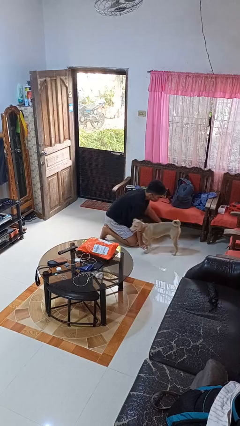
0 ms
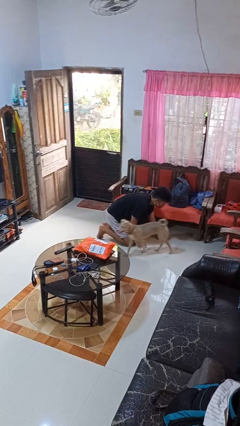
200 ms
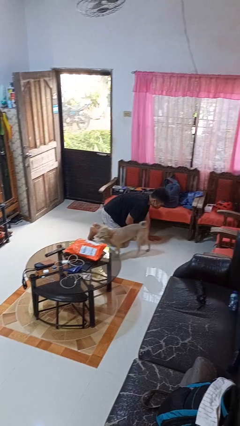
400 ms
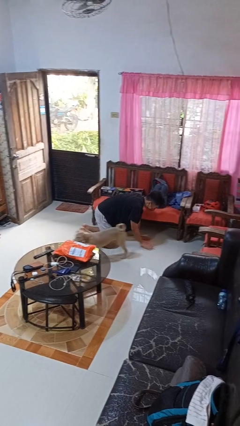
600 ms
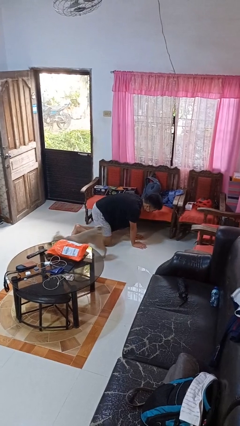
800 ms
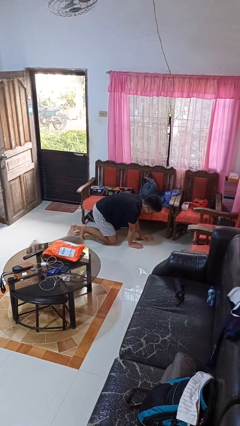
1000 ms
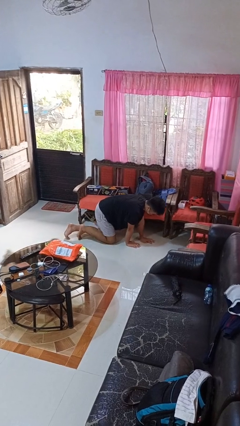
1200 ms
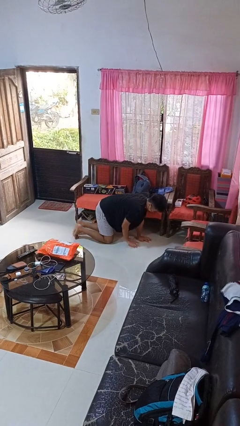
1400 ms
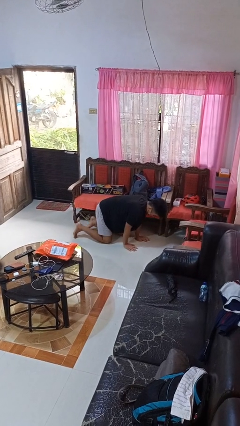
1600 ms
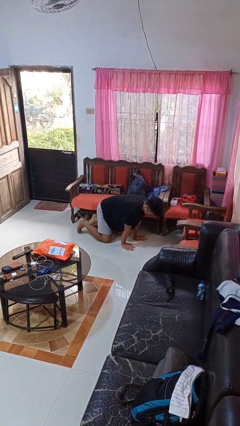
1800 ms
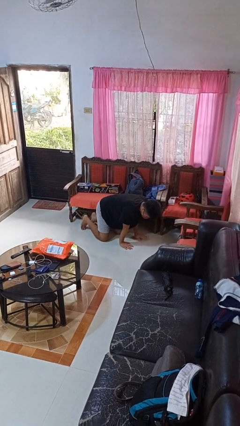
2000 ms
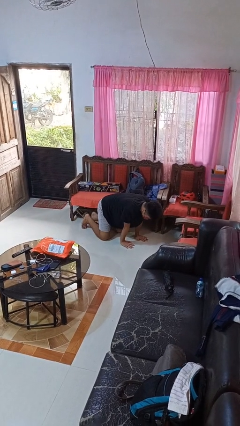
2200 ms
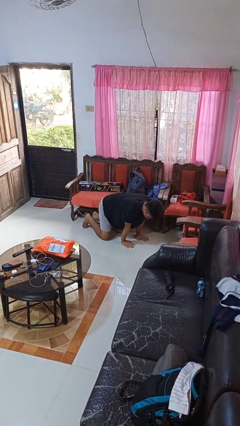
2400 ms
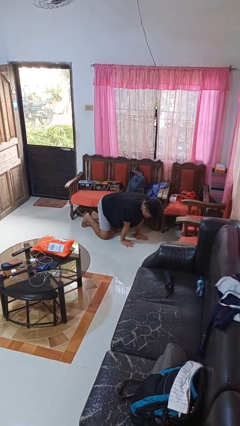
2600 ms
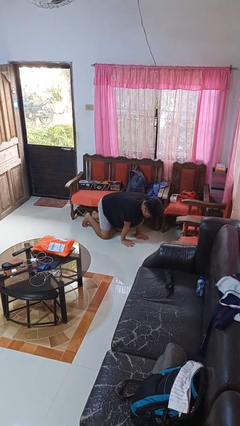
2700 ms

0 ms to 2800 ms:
person crawls

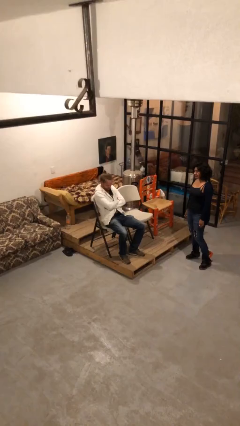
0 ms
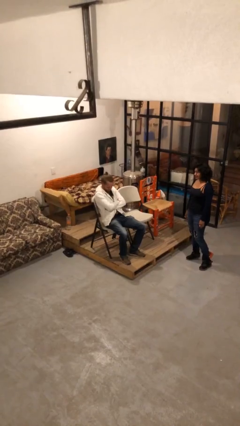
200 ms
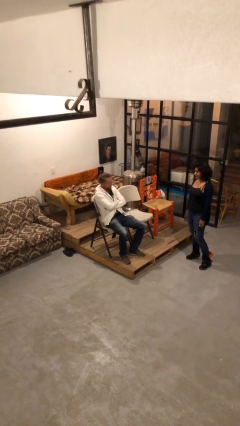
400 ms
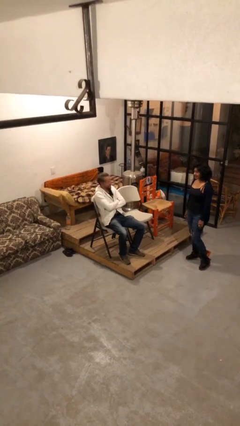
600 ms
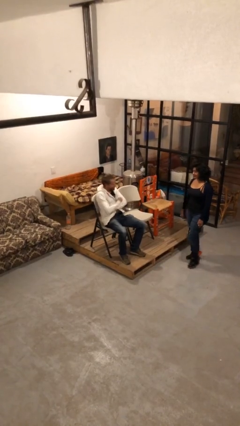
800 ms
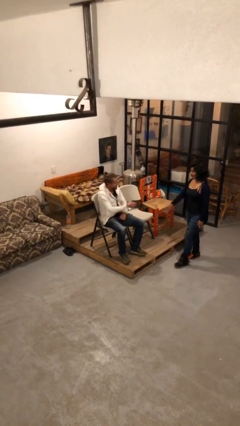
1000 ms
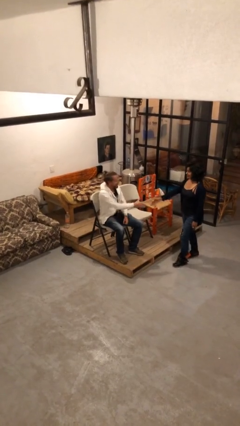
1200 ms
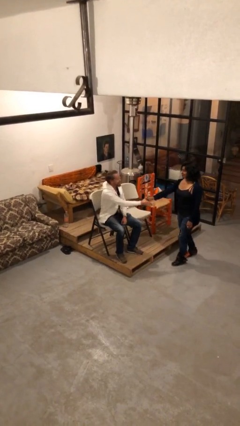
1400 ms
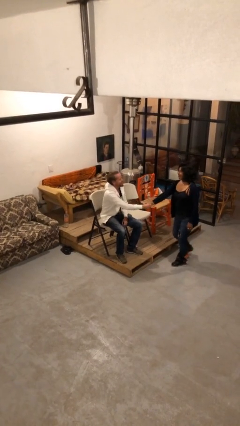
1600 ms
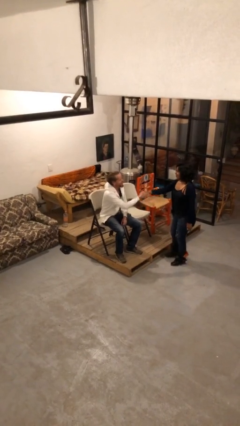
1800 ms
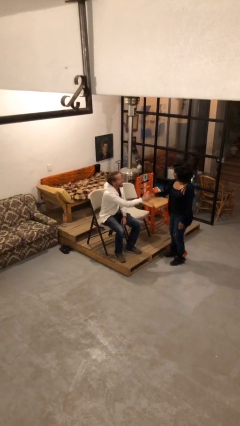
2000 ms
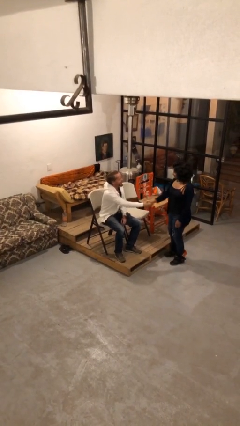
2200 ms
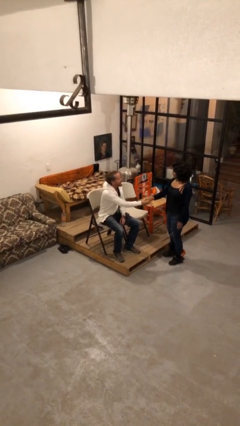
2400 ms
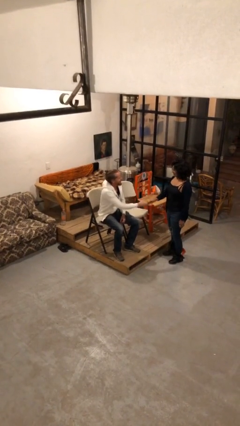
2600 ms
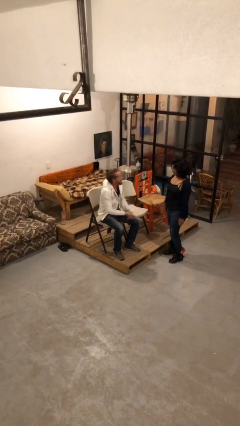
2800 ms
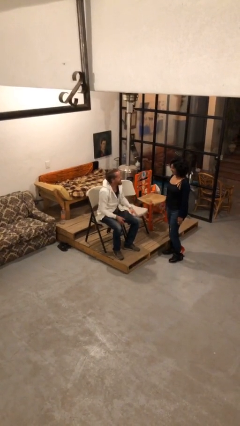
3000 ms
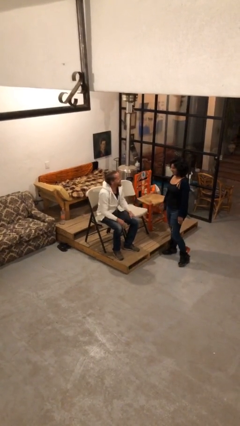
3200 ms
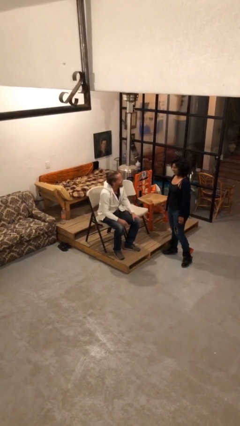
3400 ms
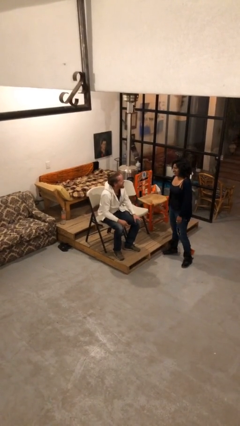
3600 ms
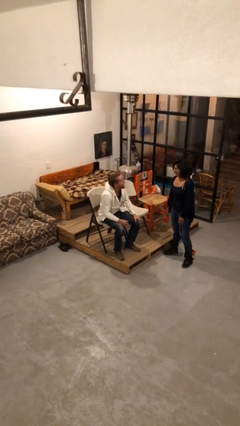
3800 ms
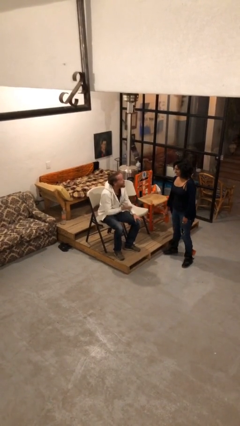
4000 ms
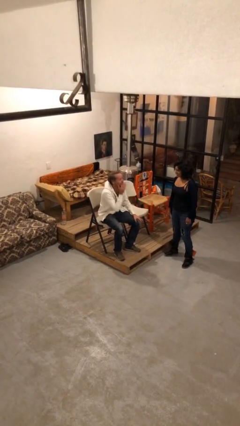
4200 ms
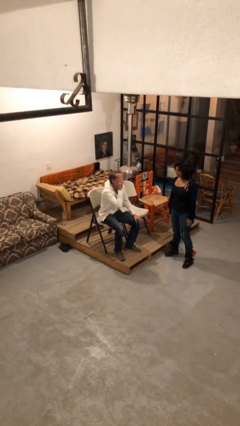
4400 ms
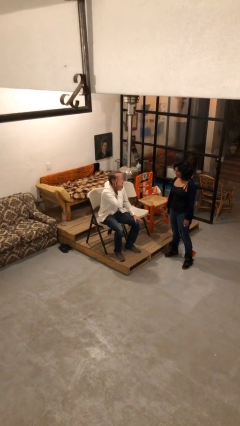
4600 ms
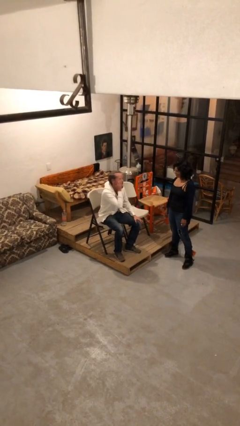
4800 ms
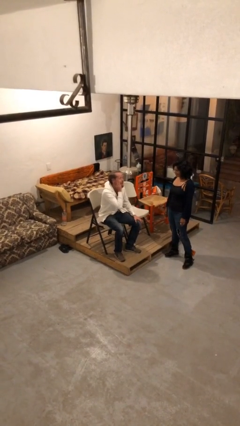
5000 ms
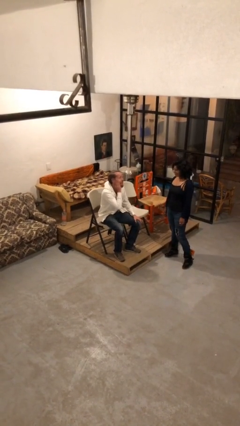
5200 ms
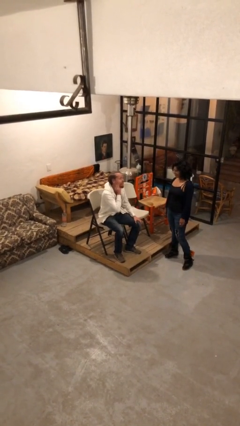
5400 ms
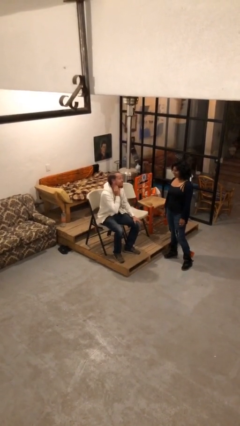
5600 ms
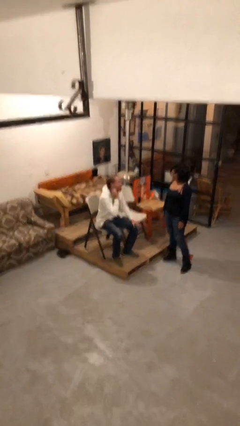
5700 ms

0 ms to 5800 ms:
person shakes hand

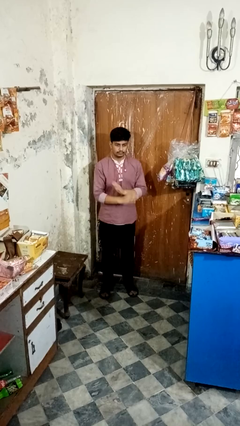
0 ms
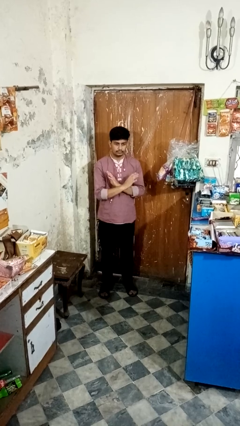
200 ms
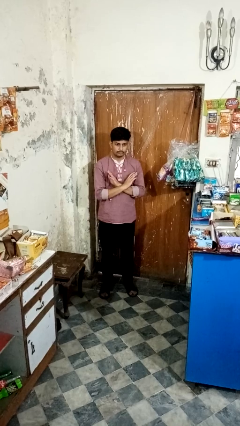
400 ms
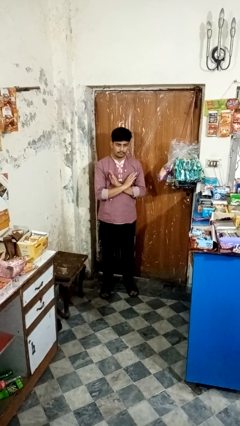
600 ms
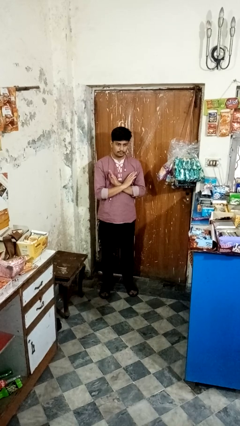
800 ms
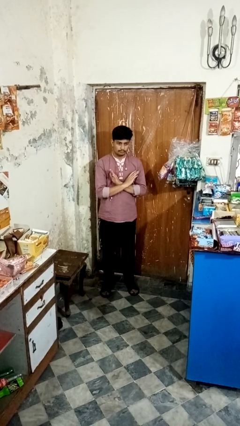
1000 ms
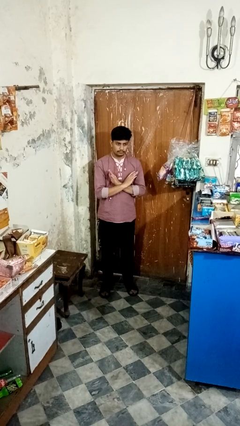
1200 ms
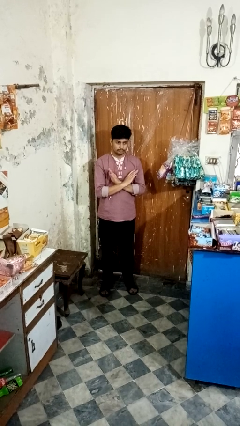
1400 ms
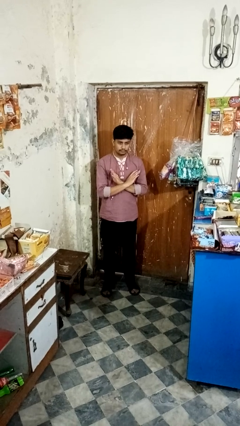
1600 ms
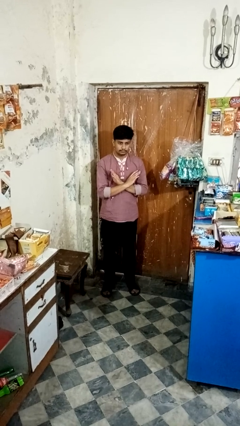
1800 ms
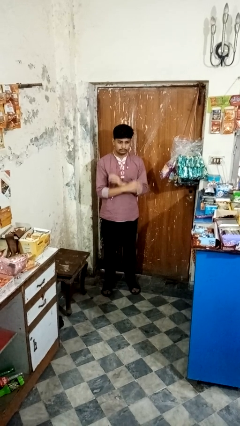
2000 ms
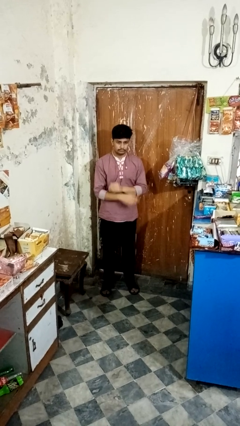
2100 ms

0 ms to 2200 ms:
person gestures arms x

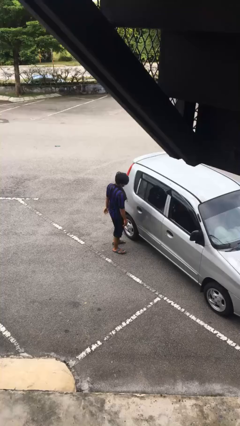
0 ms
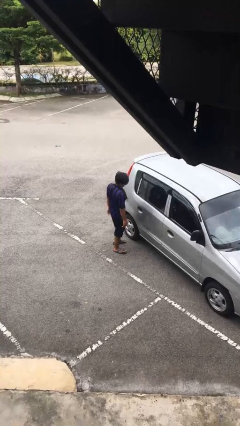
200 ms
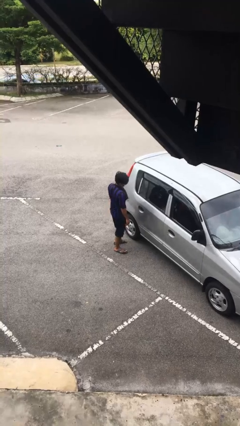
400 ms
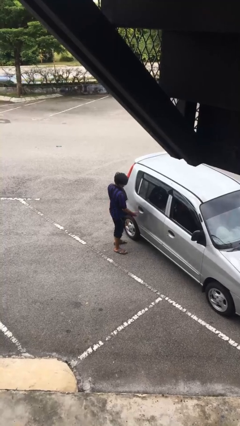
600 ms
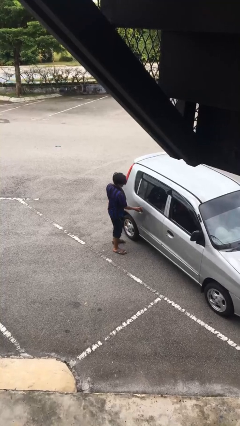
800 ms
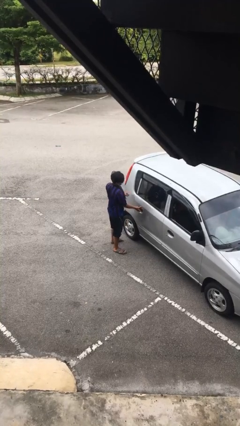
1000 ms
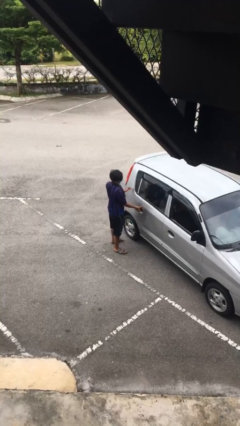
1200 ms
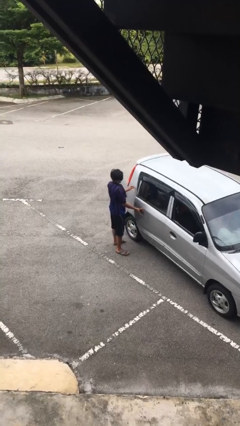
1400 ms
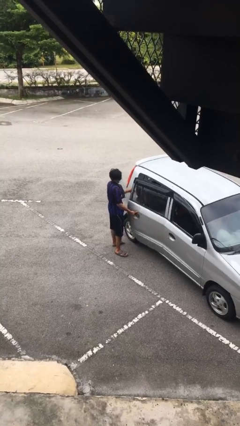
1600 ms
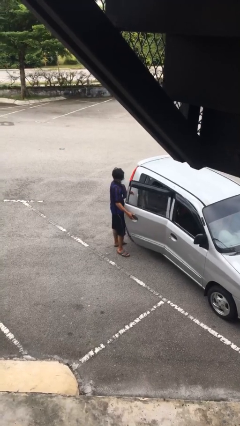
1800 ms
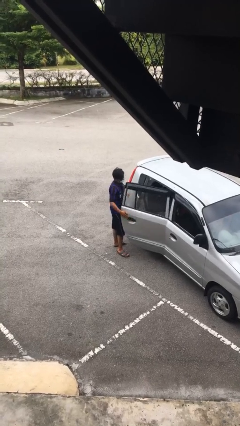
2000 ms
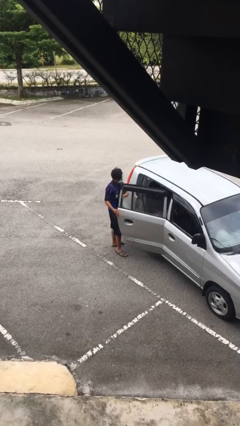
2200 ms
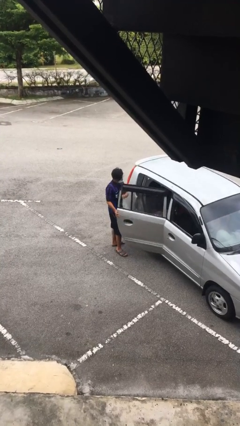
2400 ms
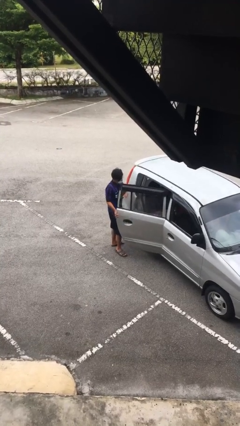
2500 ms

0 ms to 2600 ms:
person opens car door

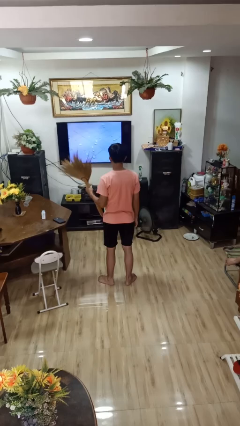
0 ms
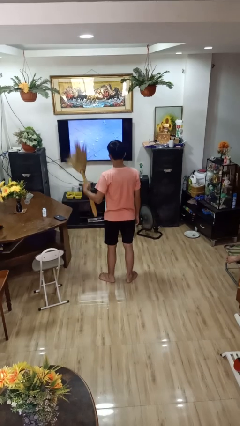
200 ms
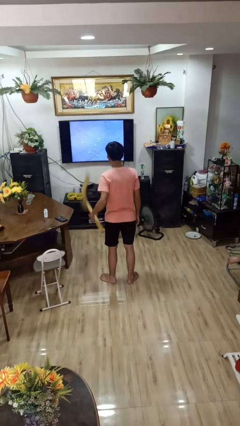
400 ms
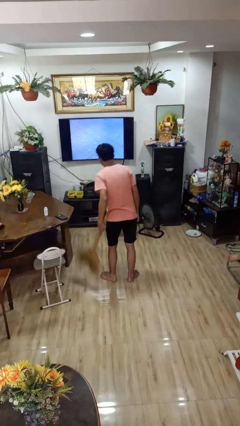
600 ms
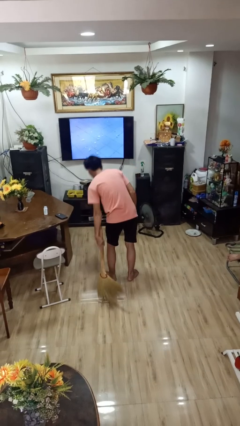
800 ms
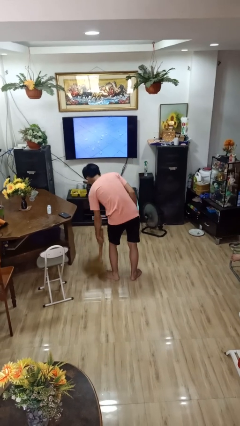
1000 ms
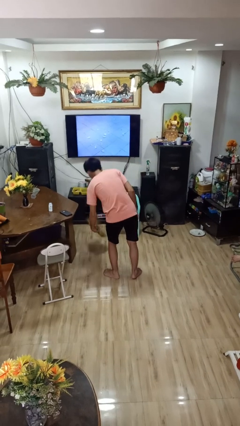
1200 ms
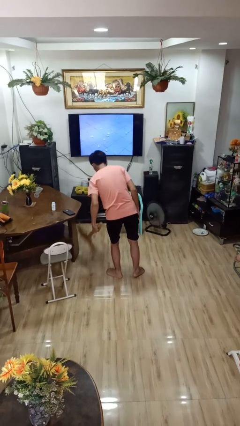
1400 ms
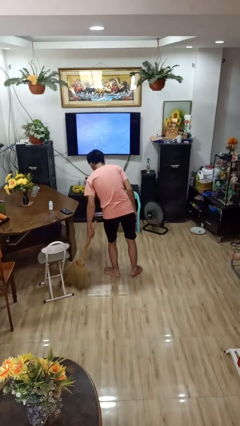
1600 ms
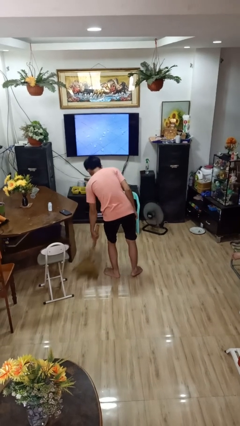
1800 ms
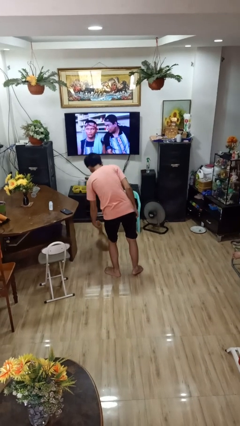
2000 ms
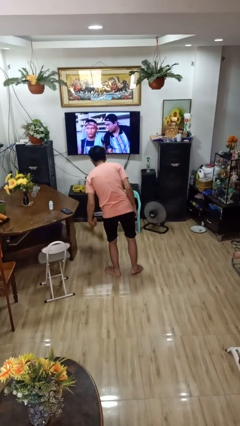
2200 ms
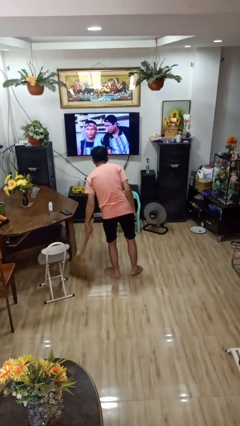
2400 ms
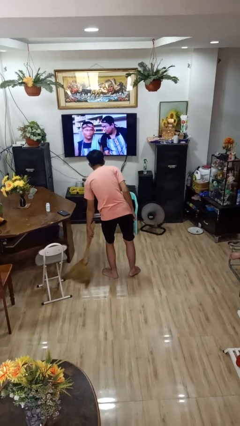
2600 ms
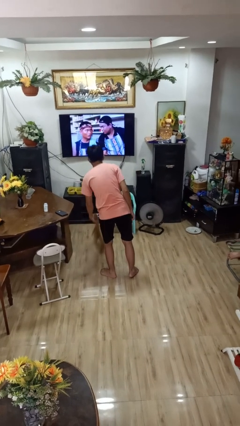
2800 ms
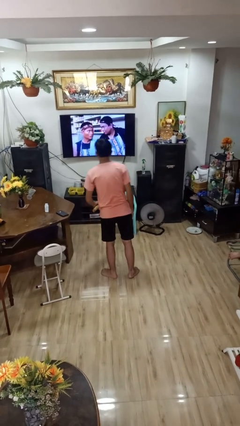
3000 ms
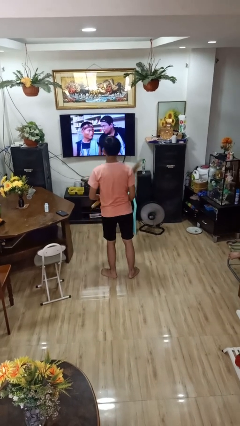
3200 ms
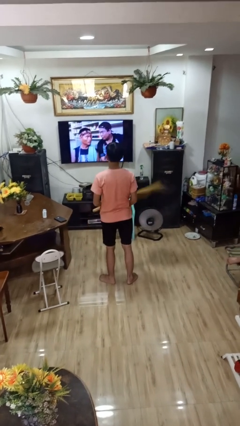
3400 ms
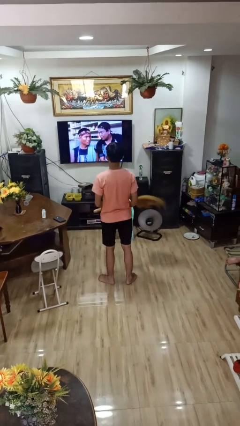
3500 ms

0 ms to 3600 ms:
person sweeps floor

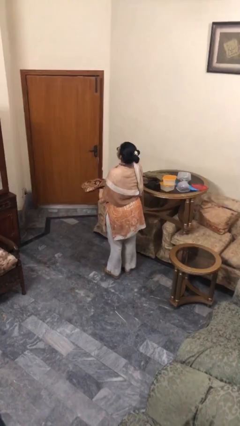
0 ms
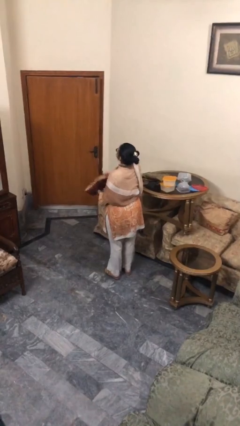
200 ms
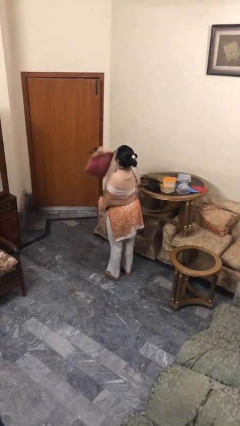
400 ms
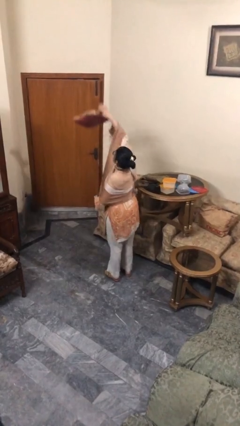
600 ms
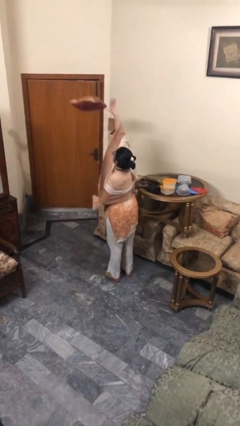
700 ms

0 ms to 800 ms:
person drops object
